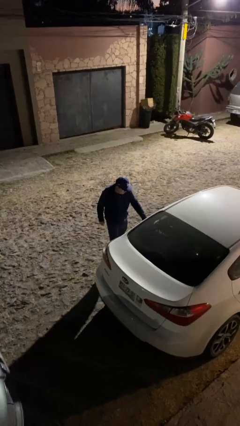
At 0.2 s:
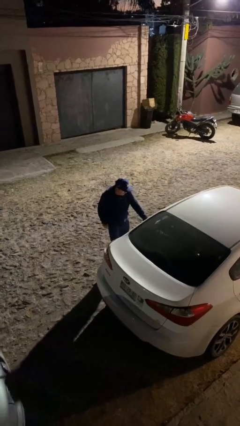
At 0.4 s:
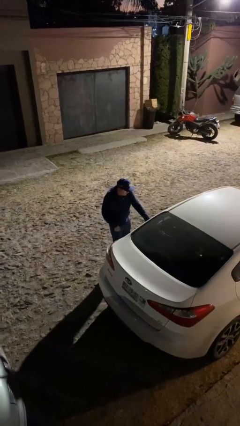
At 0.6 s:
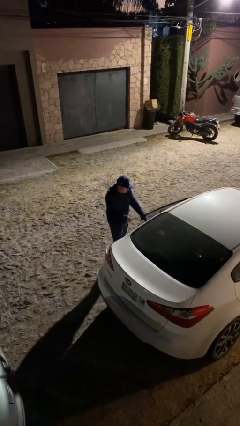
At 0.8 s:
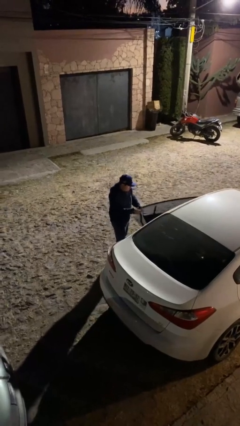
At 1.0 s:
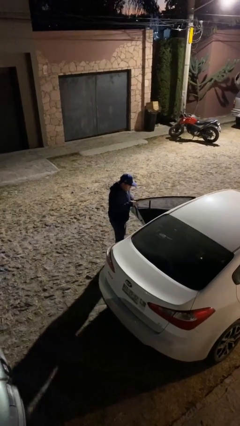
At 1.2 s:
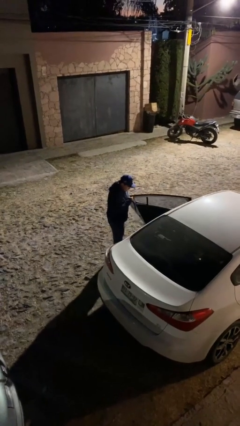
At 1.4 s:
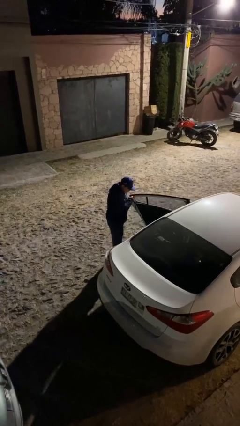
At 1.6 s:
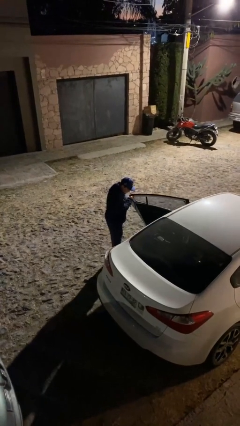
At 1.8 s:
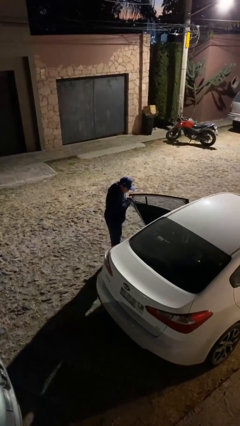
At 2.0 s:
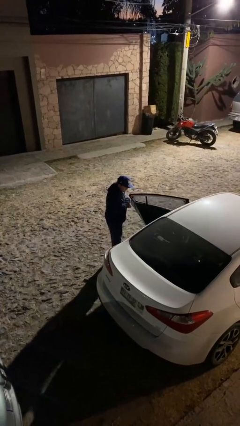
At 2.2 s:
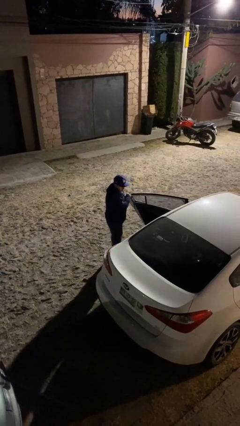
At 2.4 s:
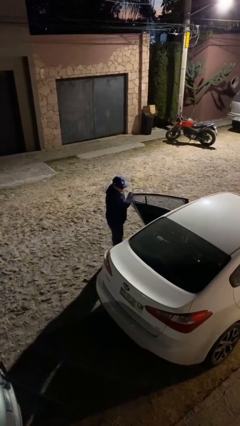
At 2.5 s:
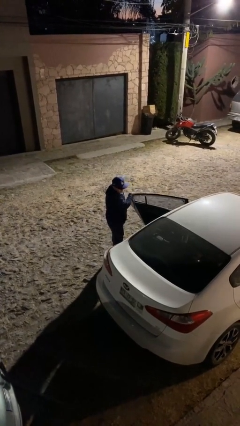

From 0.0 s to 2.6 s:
person opens car door

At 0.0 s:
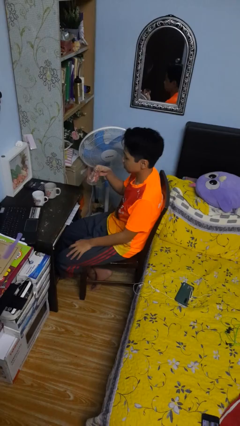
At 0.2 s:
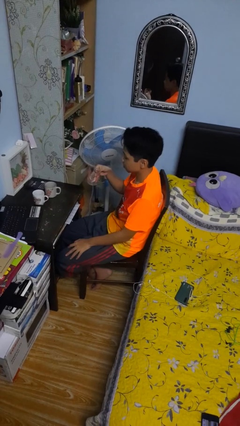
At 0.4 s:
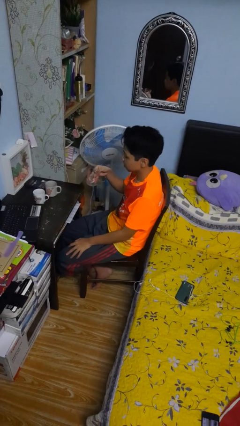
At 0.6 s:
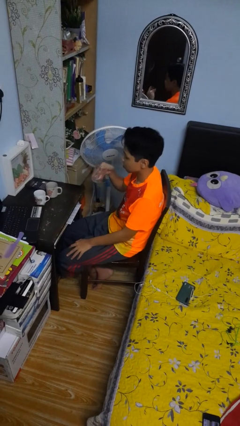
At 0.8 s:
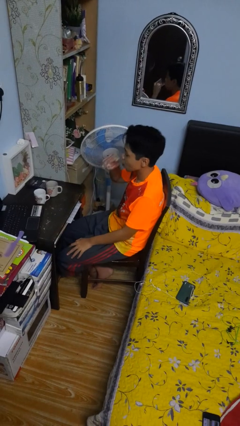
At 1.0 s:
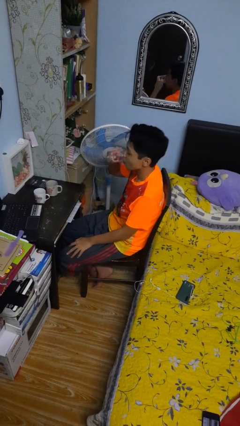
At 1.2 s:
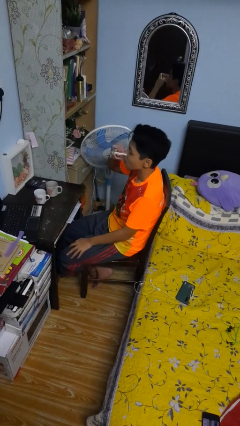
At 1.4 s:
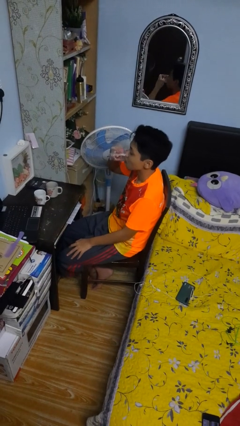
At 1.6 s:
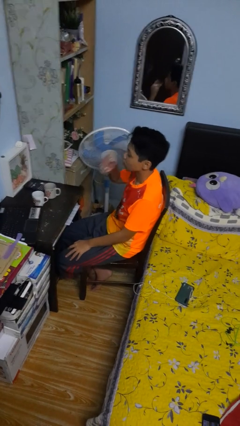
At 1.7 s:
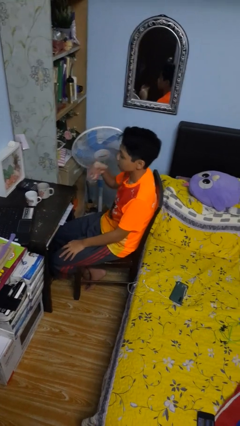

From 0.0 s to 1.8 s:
person drinks from shotglass

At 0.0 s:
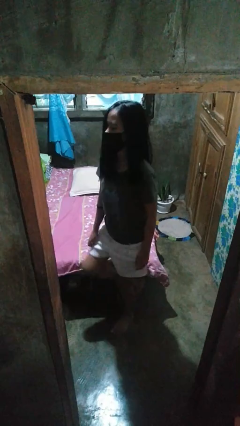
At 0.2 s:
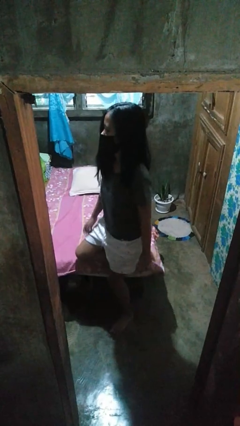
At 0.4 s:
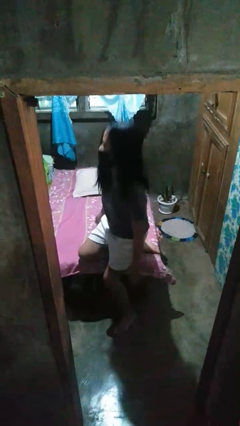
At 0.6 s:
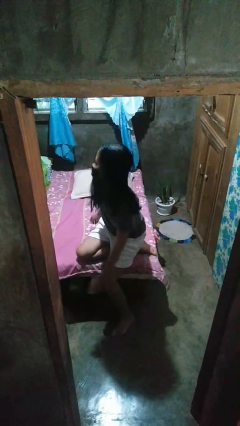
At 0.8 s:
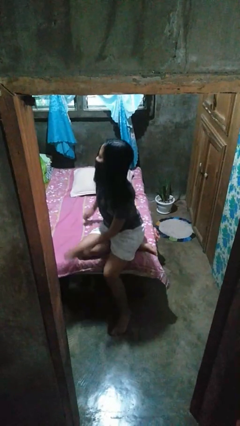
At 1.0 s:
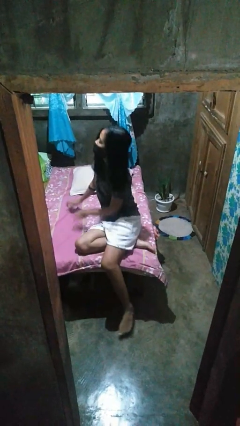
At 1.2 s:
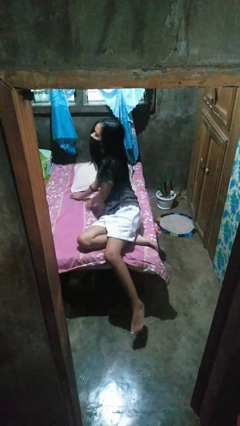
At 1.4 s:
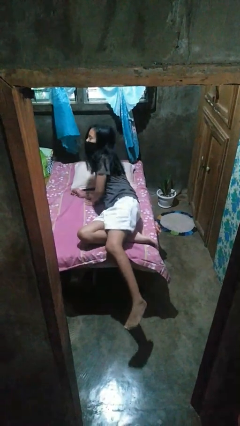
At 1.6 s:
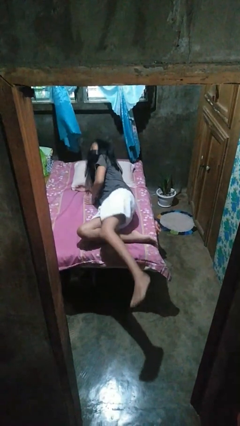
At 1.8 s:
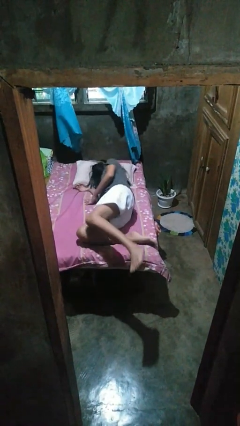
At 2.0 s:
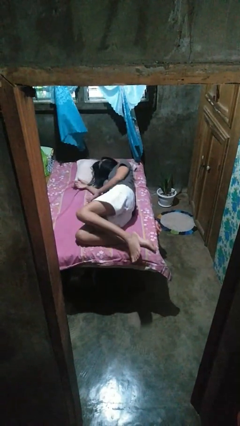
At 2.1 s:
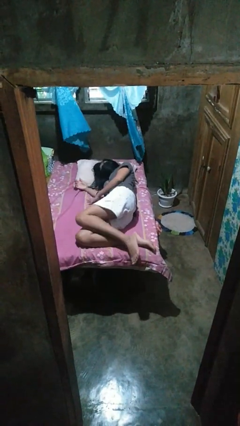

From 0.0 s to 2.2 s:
person lies down on bed

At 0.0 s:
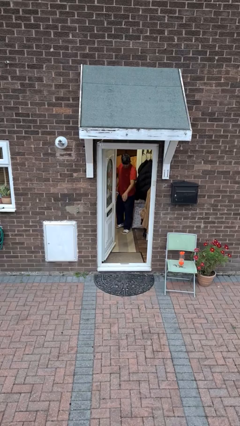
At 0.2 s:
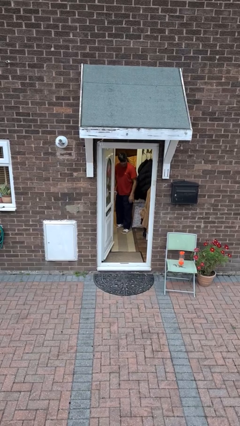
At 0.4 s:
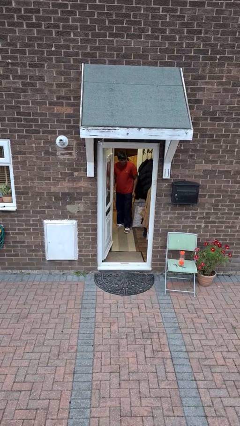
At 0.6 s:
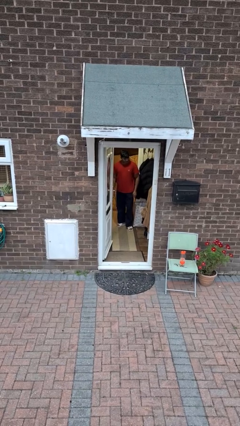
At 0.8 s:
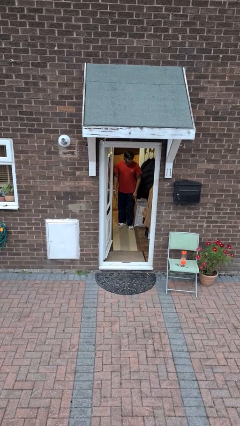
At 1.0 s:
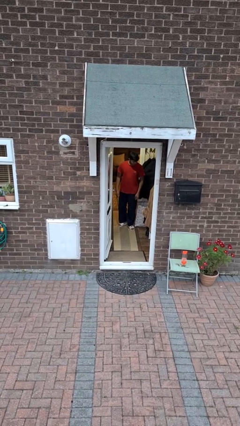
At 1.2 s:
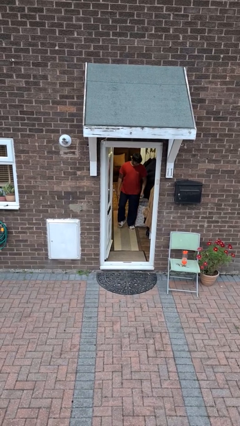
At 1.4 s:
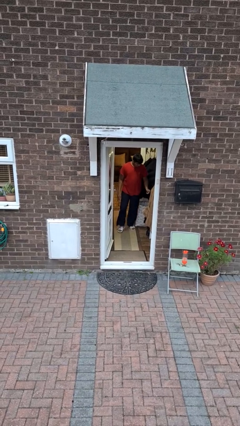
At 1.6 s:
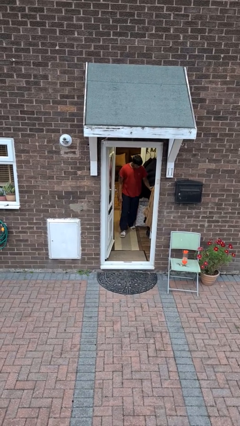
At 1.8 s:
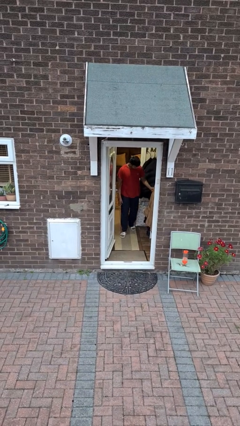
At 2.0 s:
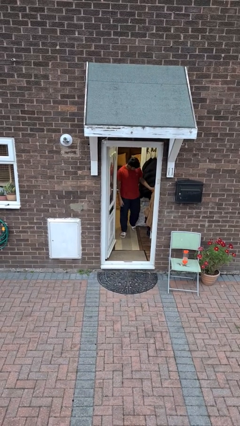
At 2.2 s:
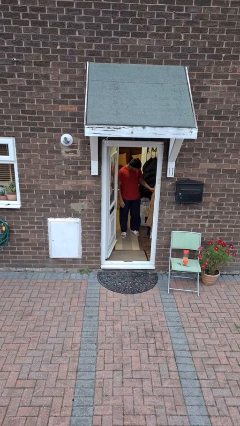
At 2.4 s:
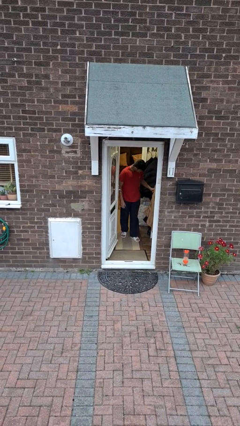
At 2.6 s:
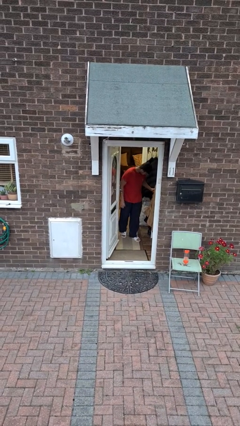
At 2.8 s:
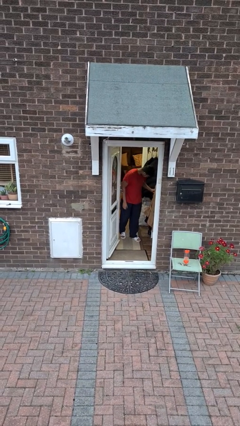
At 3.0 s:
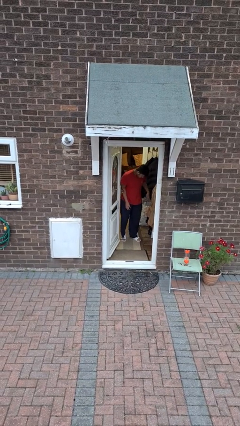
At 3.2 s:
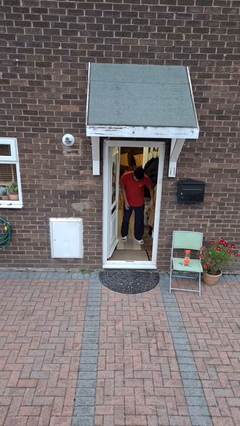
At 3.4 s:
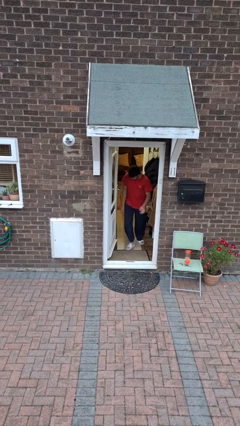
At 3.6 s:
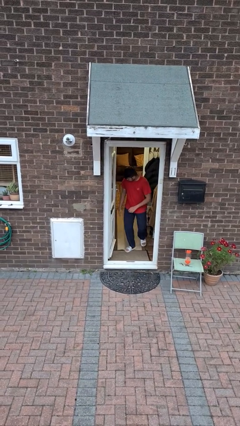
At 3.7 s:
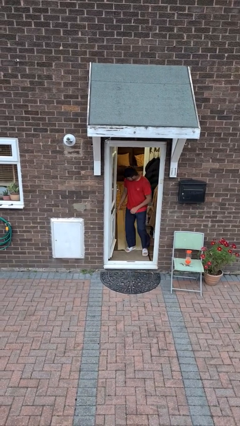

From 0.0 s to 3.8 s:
person bumps into wall

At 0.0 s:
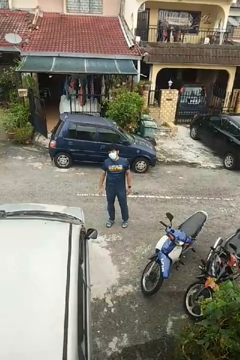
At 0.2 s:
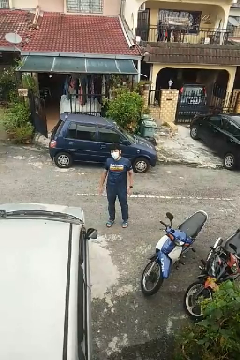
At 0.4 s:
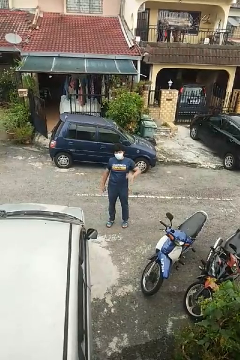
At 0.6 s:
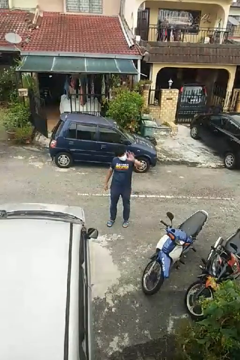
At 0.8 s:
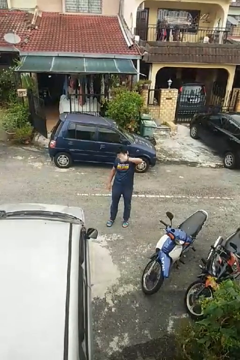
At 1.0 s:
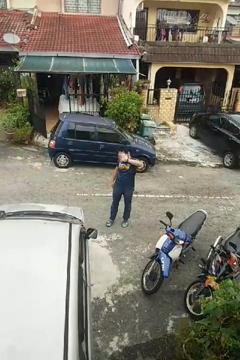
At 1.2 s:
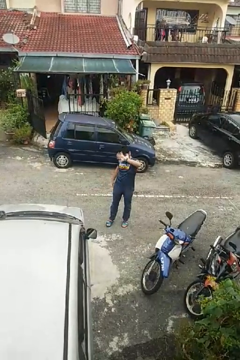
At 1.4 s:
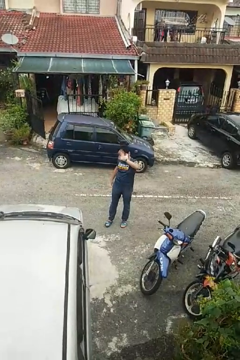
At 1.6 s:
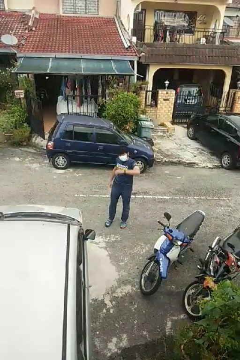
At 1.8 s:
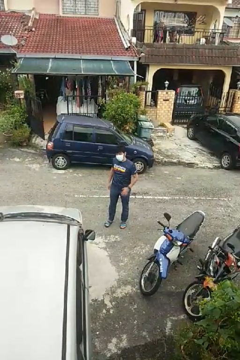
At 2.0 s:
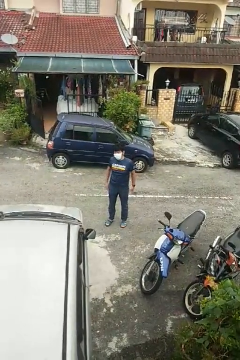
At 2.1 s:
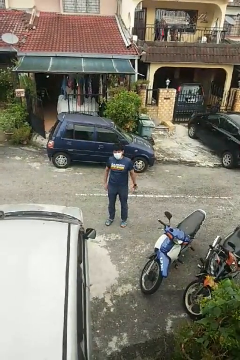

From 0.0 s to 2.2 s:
person waves at person

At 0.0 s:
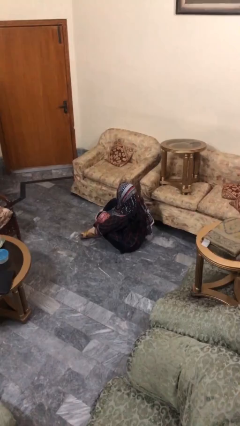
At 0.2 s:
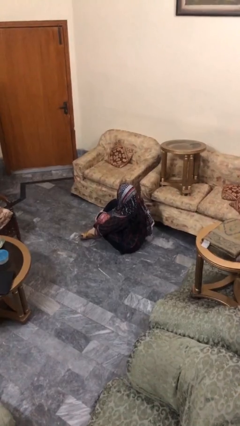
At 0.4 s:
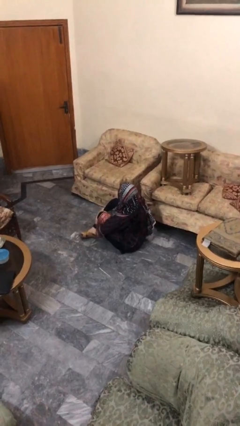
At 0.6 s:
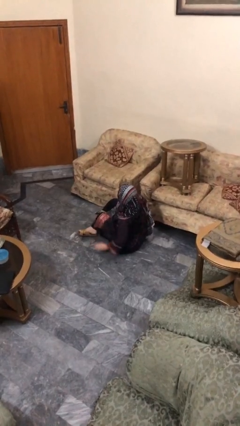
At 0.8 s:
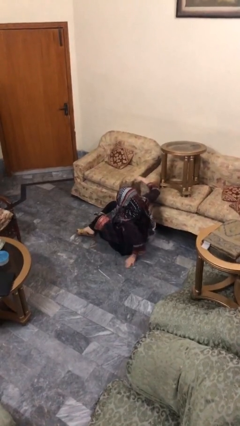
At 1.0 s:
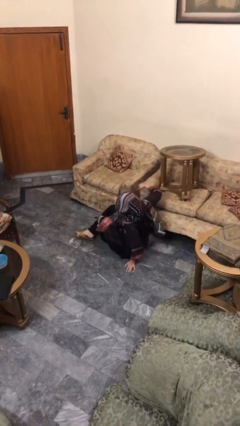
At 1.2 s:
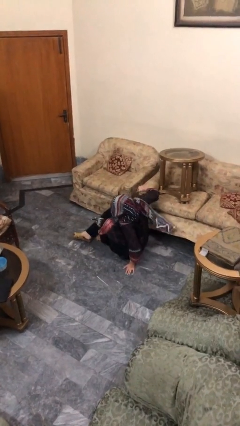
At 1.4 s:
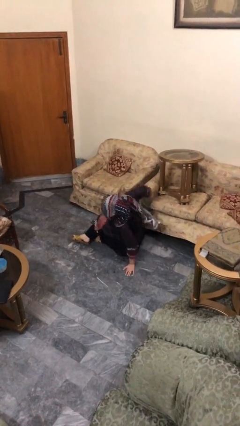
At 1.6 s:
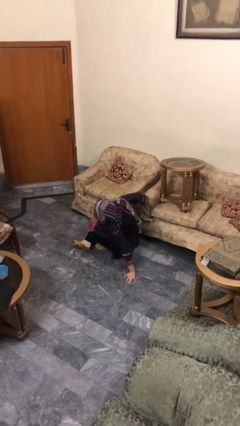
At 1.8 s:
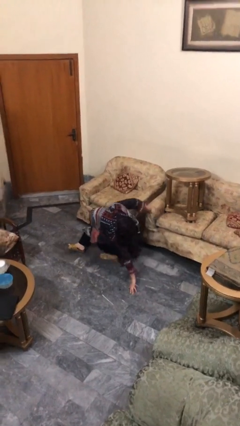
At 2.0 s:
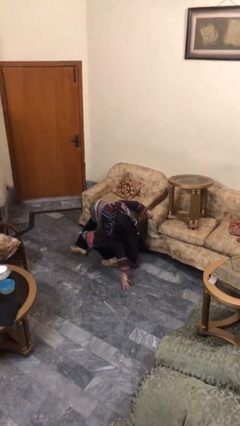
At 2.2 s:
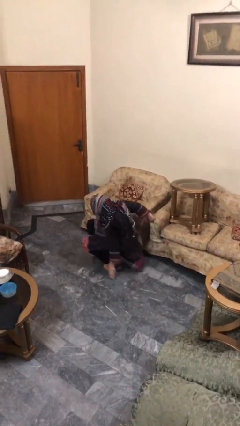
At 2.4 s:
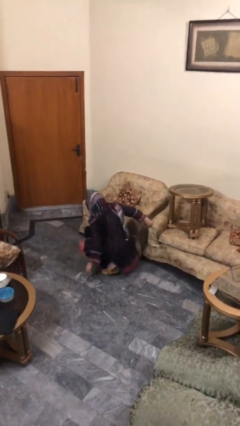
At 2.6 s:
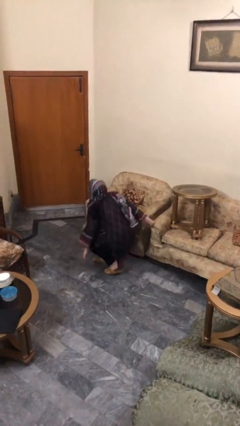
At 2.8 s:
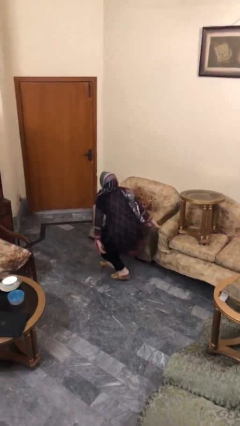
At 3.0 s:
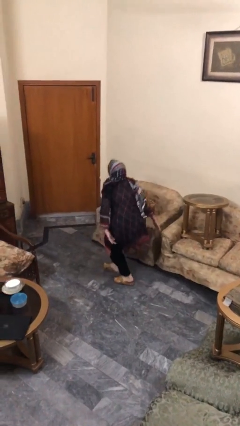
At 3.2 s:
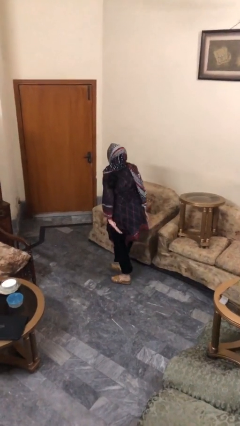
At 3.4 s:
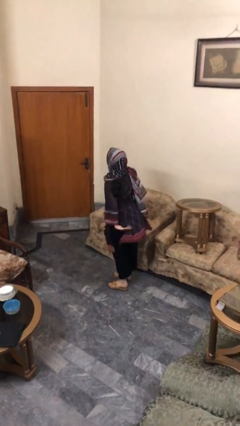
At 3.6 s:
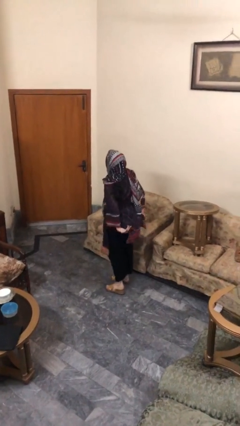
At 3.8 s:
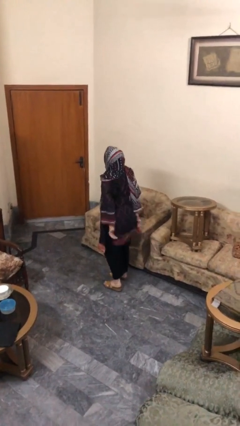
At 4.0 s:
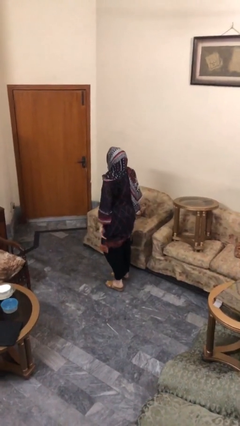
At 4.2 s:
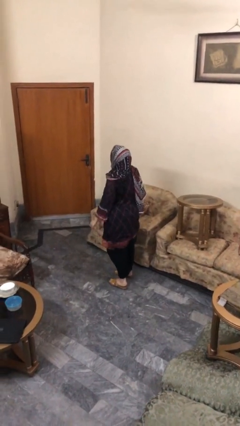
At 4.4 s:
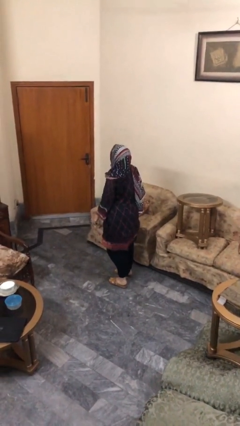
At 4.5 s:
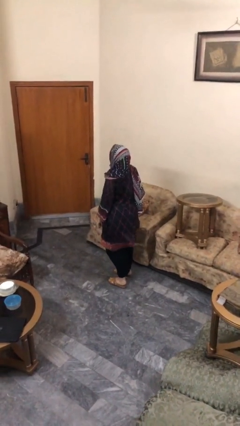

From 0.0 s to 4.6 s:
person stands up from floor

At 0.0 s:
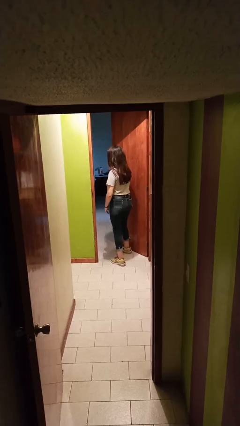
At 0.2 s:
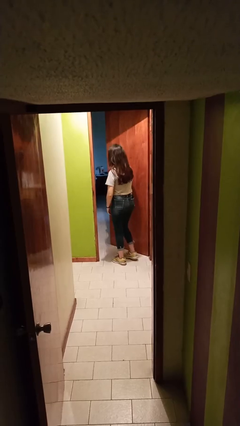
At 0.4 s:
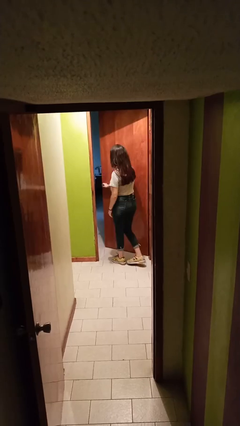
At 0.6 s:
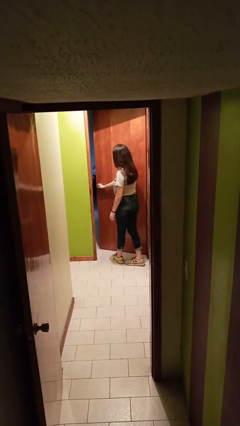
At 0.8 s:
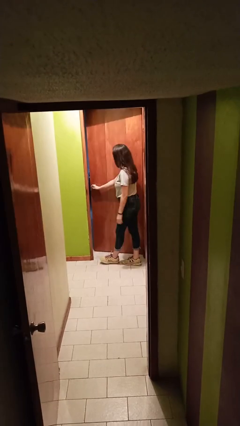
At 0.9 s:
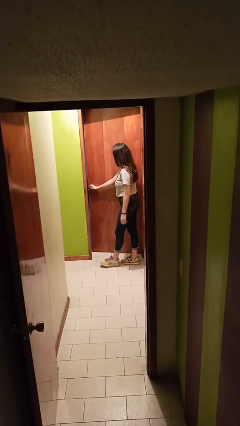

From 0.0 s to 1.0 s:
person closes facility door
